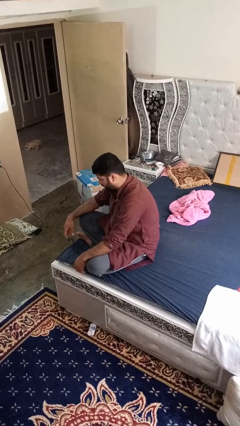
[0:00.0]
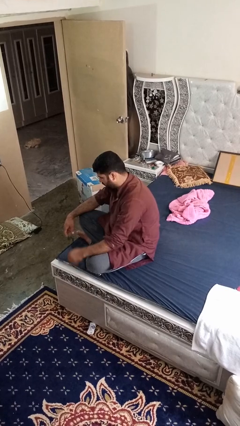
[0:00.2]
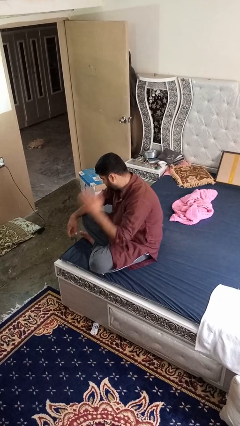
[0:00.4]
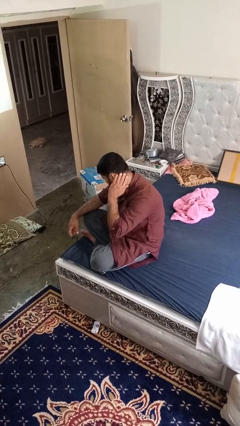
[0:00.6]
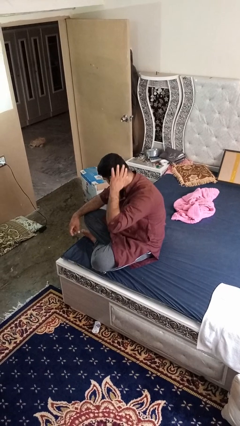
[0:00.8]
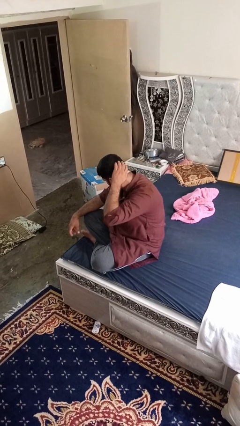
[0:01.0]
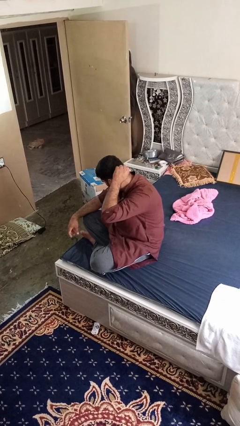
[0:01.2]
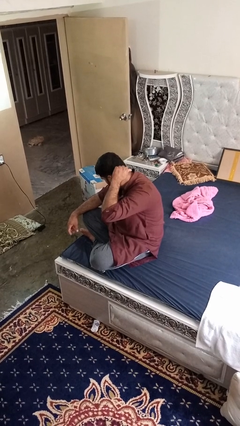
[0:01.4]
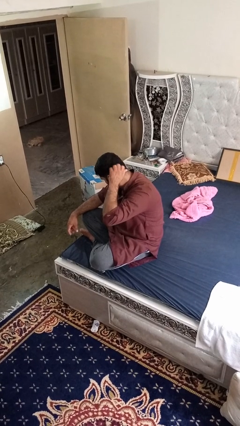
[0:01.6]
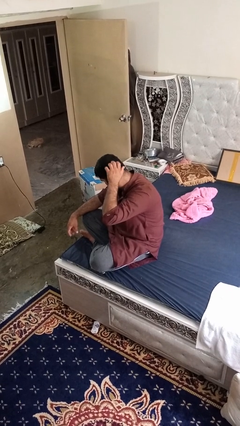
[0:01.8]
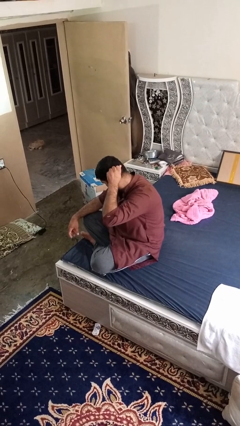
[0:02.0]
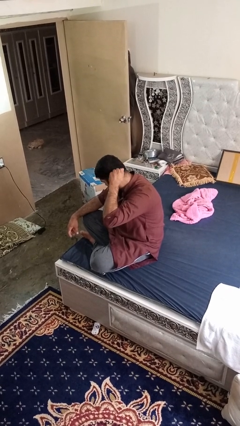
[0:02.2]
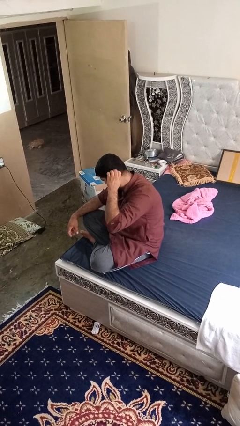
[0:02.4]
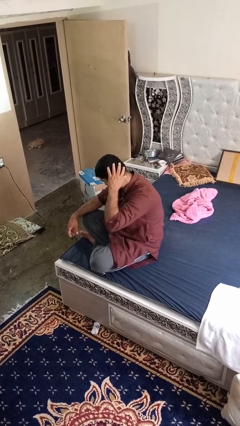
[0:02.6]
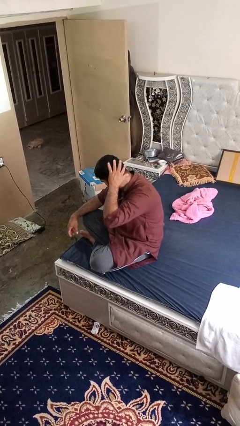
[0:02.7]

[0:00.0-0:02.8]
person strokes hair

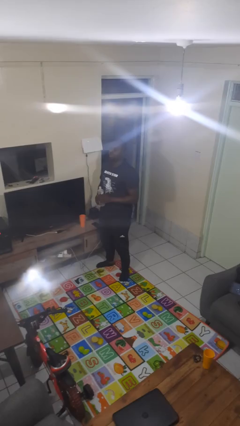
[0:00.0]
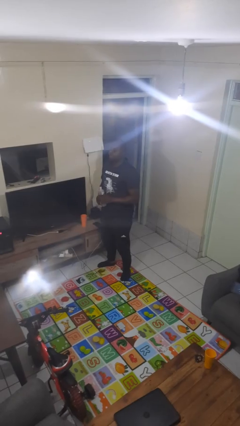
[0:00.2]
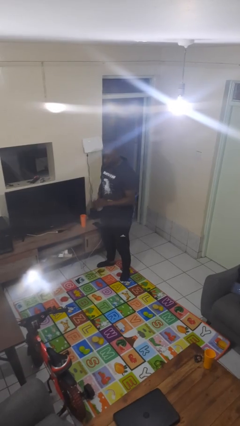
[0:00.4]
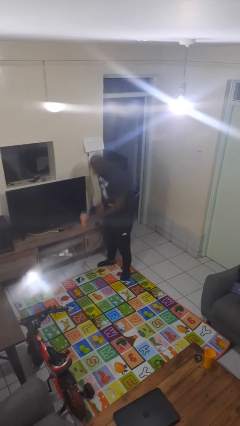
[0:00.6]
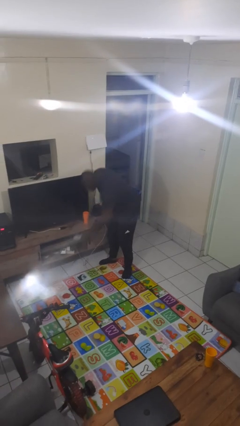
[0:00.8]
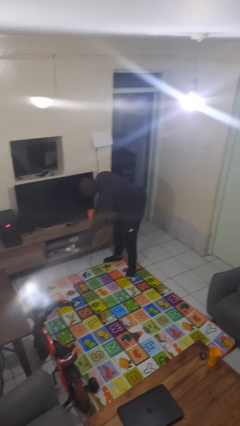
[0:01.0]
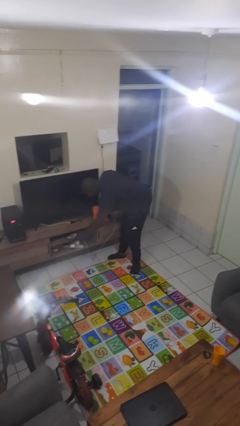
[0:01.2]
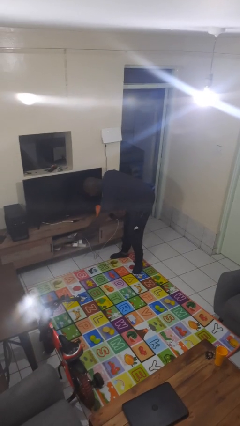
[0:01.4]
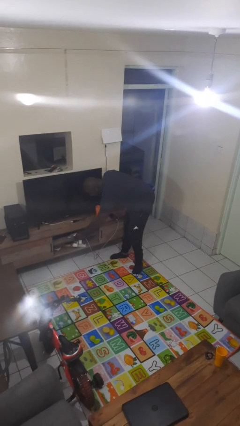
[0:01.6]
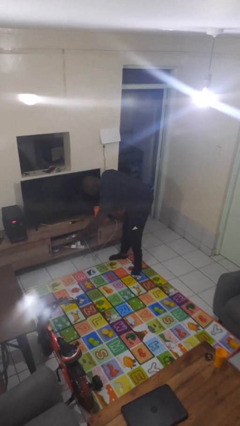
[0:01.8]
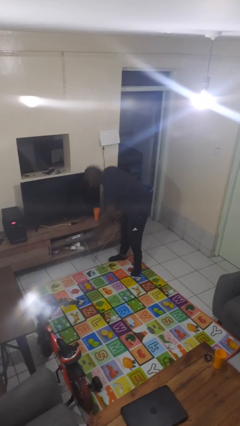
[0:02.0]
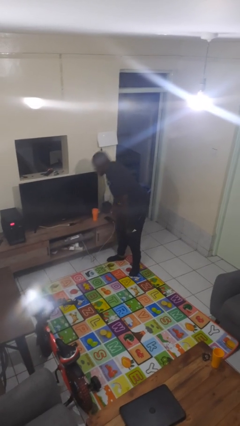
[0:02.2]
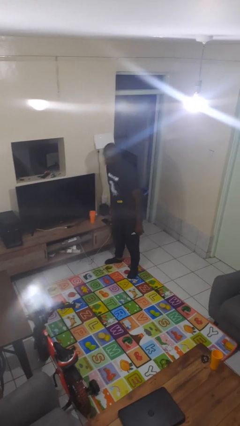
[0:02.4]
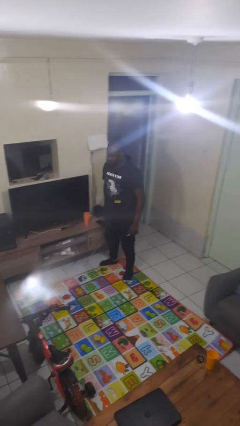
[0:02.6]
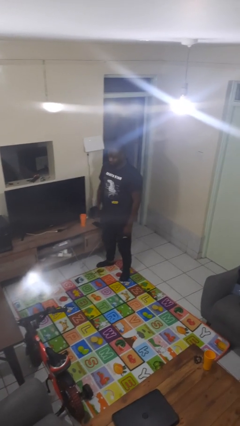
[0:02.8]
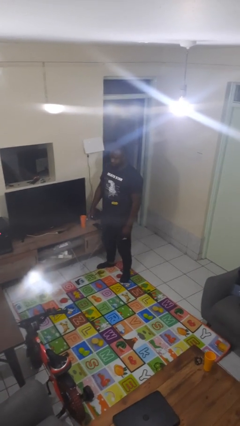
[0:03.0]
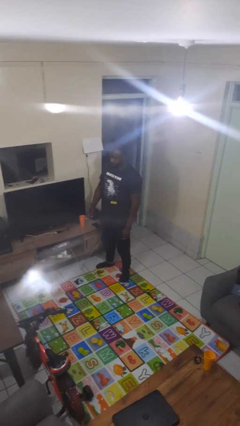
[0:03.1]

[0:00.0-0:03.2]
person puts down object into cabinet

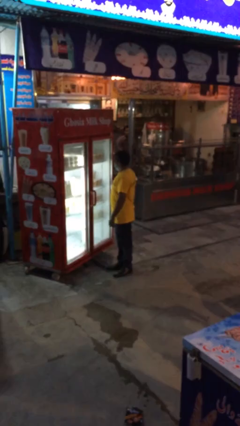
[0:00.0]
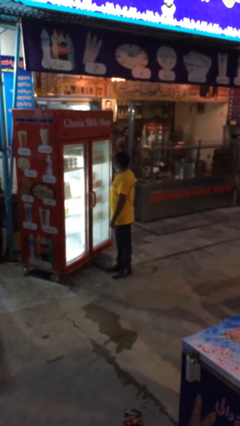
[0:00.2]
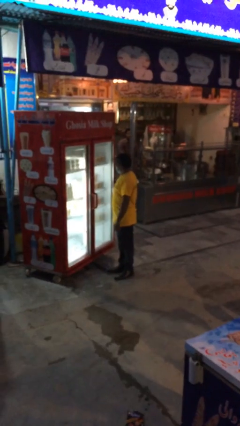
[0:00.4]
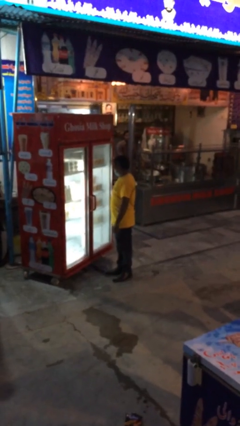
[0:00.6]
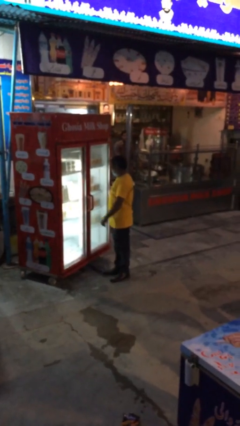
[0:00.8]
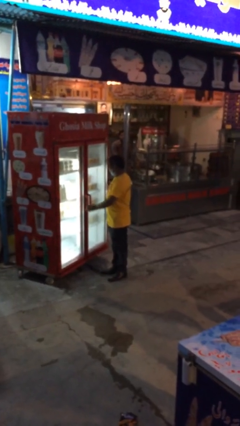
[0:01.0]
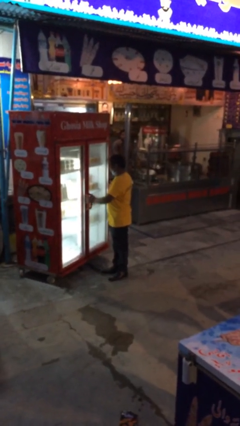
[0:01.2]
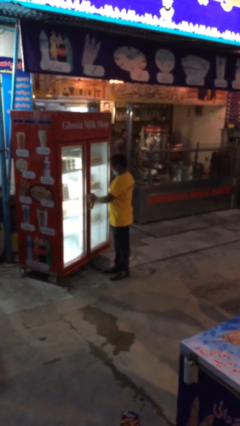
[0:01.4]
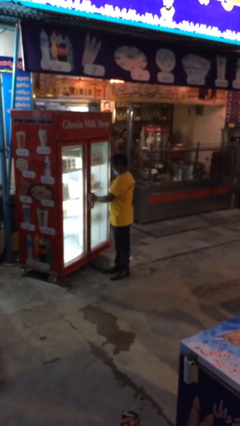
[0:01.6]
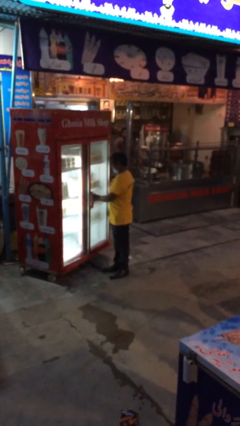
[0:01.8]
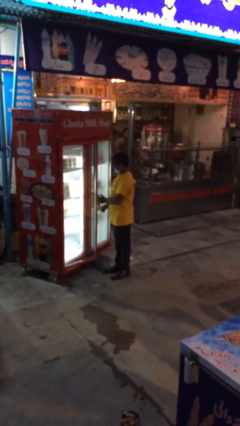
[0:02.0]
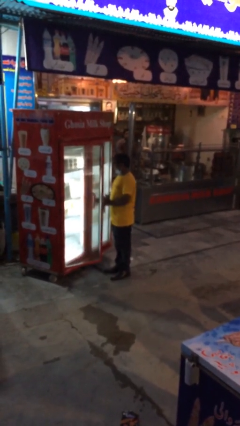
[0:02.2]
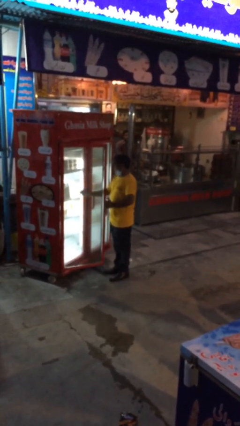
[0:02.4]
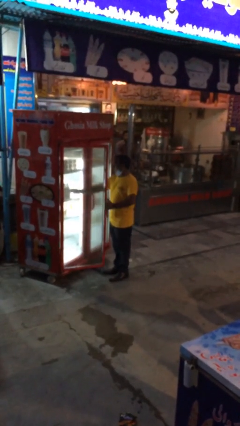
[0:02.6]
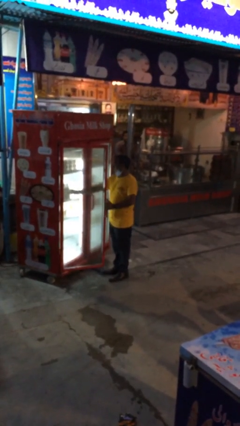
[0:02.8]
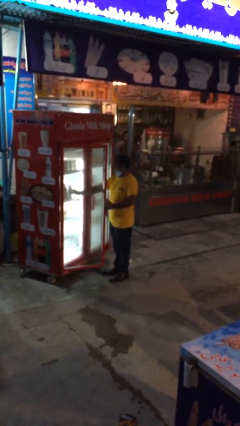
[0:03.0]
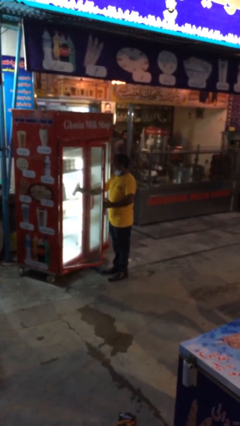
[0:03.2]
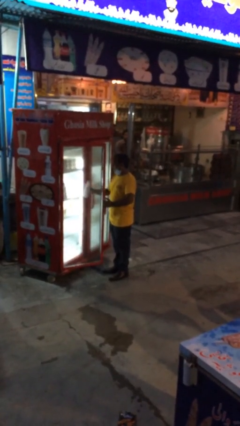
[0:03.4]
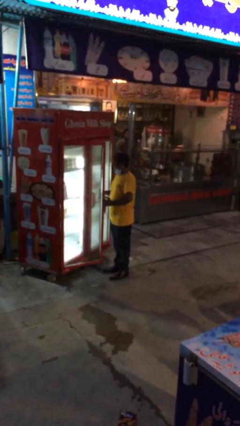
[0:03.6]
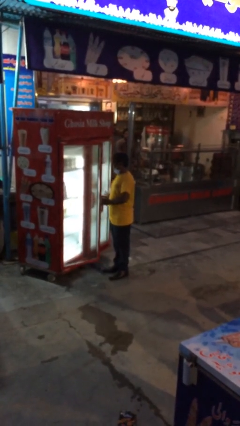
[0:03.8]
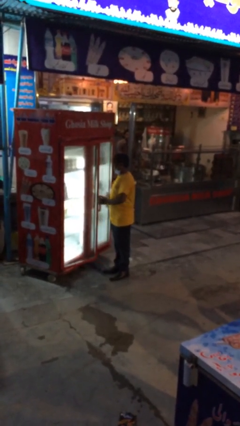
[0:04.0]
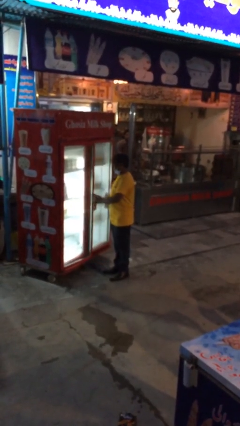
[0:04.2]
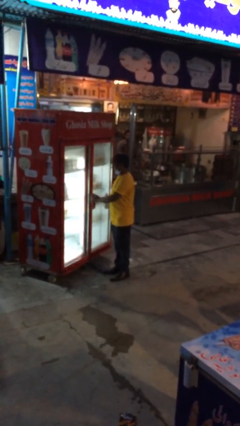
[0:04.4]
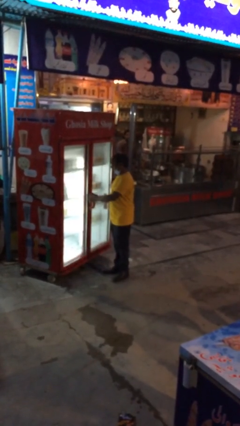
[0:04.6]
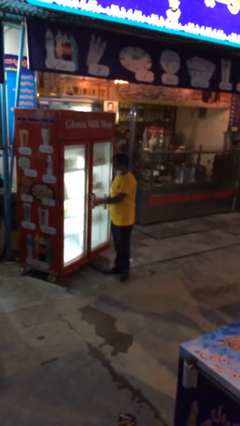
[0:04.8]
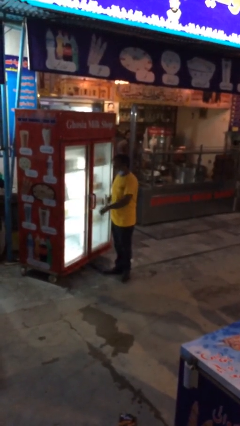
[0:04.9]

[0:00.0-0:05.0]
person purchases from machine

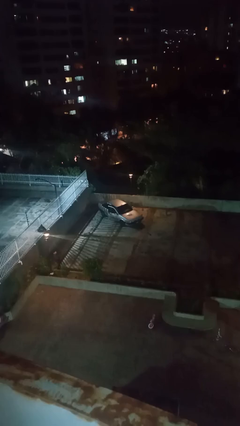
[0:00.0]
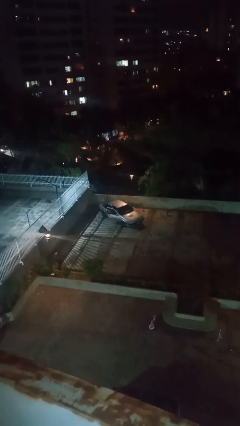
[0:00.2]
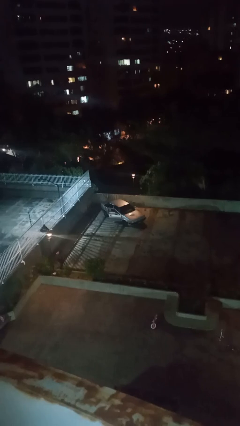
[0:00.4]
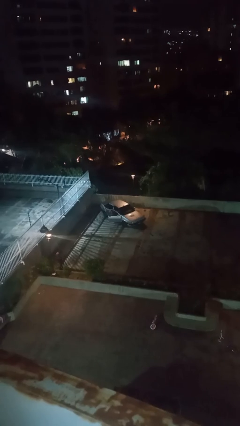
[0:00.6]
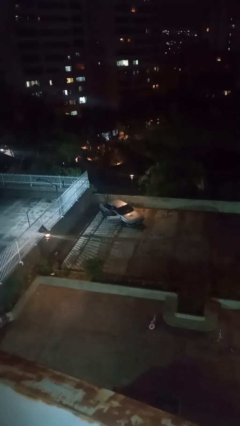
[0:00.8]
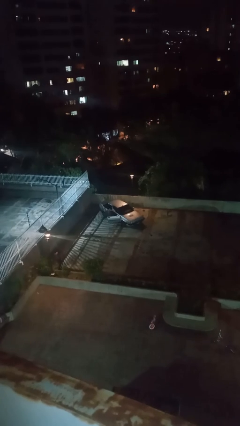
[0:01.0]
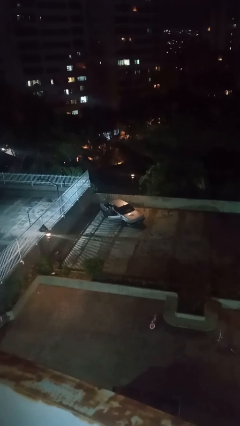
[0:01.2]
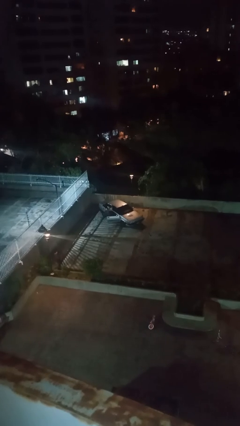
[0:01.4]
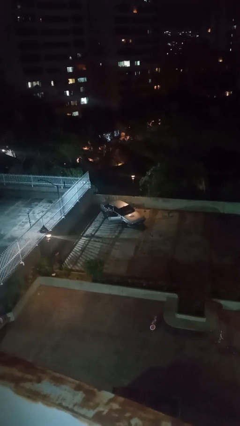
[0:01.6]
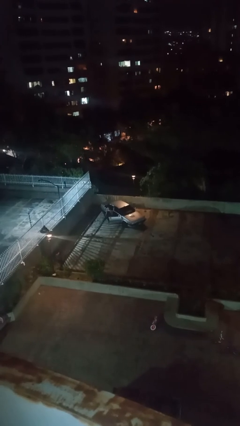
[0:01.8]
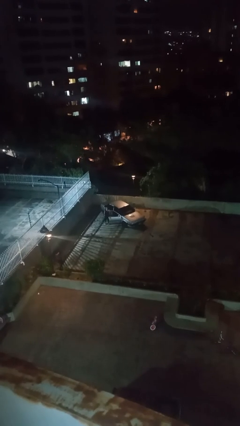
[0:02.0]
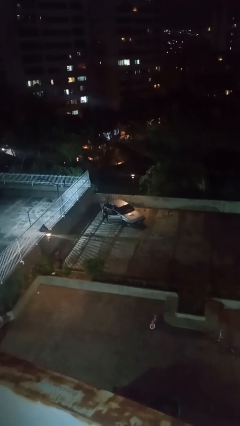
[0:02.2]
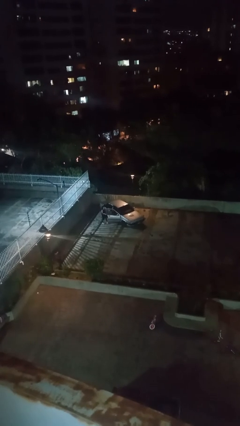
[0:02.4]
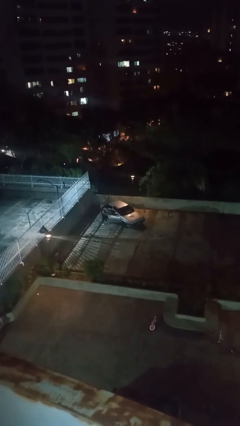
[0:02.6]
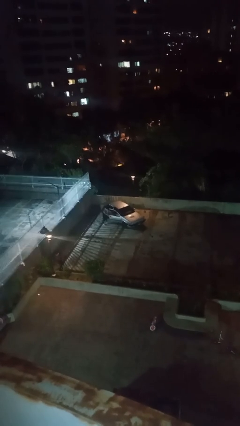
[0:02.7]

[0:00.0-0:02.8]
car drops off person

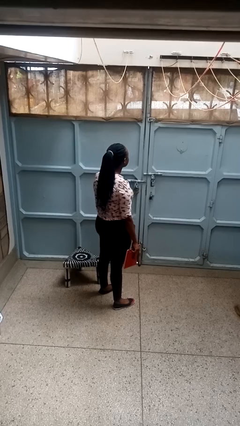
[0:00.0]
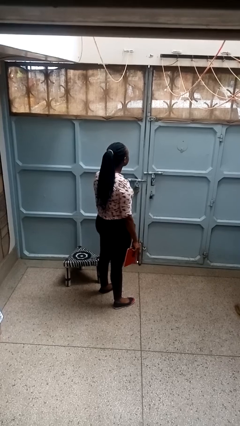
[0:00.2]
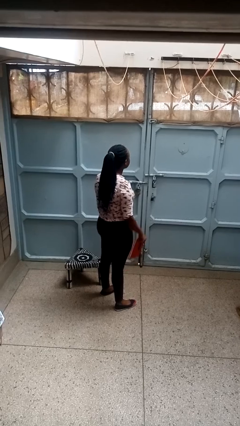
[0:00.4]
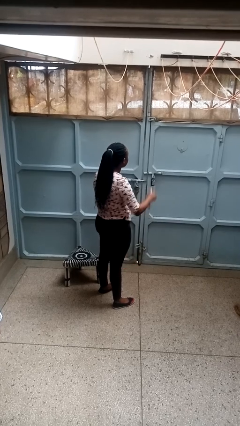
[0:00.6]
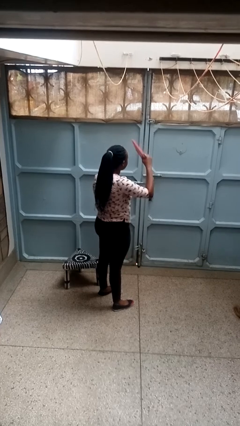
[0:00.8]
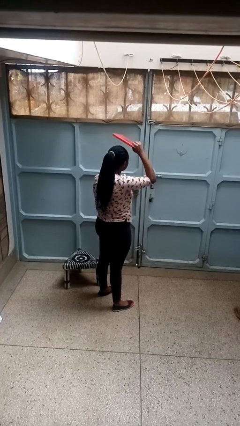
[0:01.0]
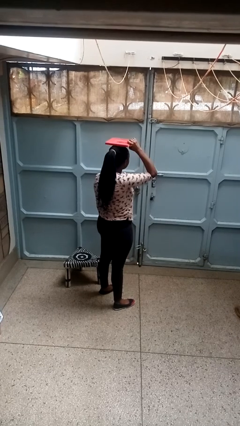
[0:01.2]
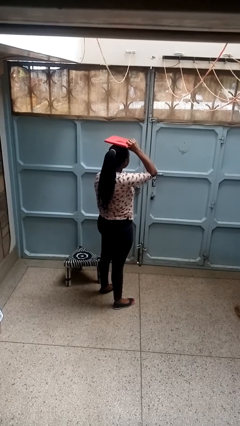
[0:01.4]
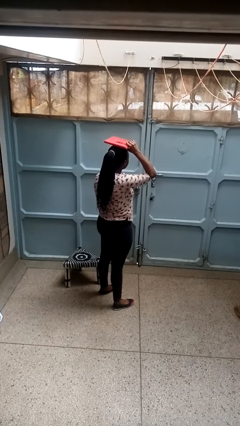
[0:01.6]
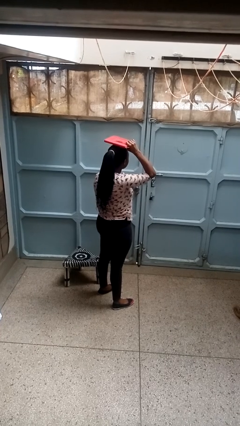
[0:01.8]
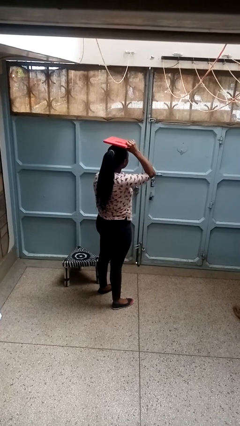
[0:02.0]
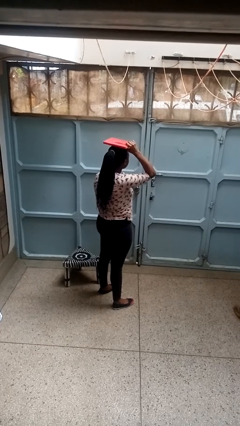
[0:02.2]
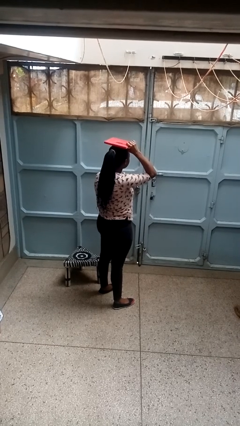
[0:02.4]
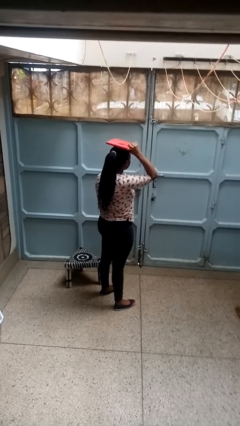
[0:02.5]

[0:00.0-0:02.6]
person holds object above head

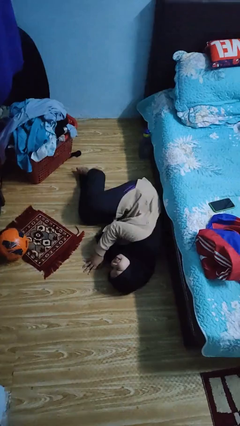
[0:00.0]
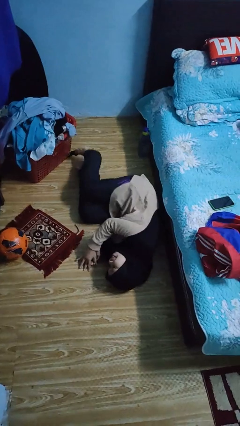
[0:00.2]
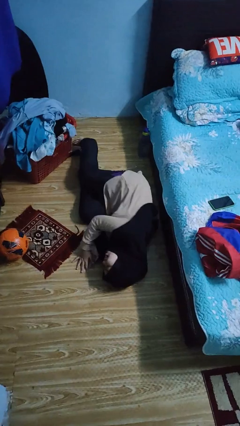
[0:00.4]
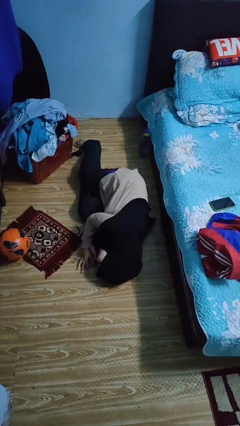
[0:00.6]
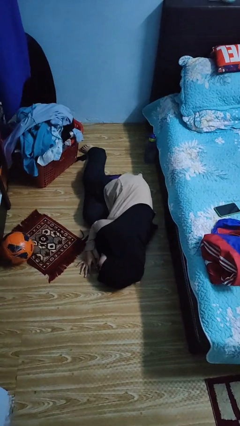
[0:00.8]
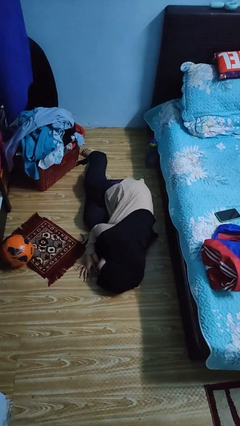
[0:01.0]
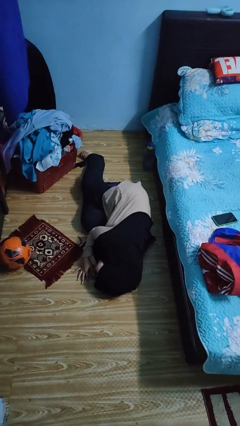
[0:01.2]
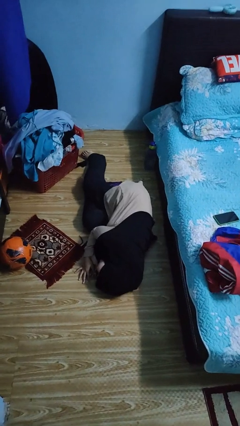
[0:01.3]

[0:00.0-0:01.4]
person lies down on floor
